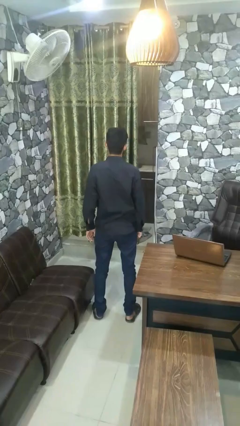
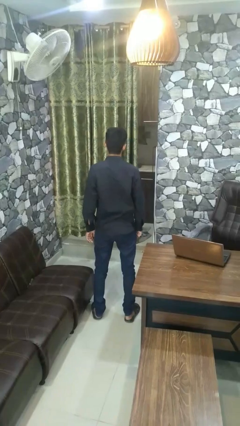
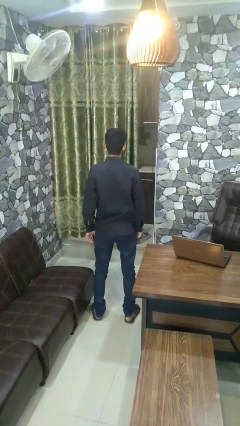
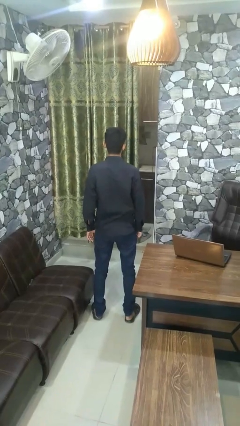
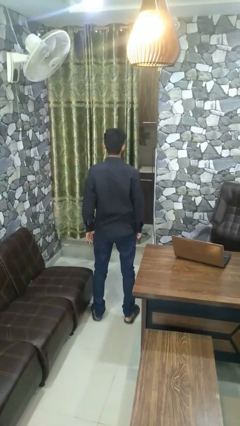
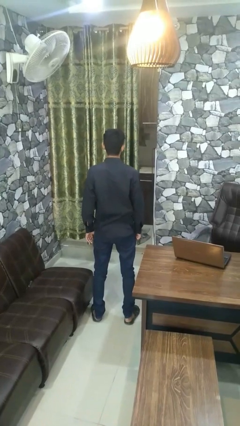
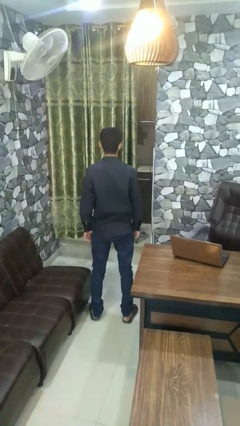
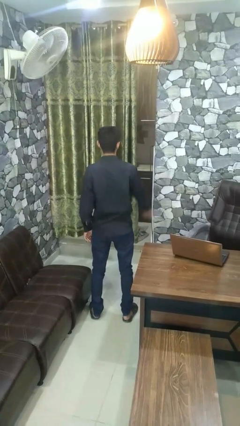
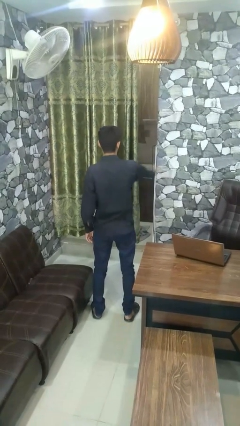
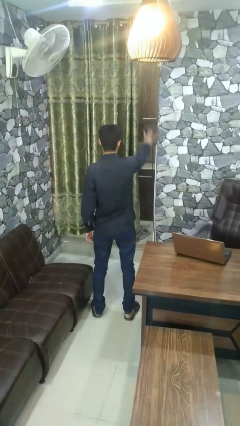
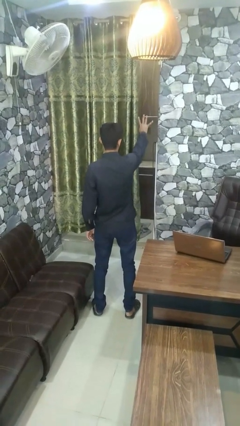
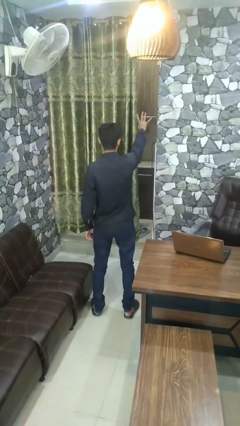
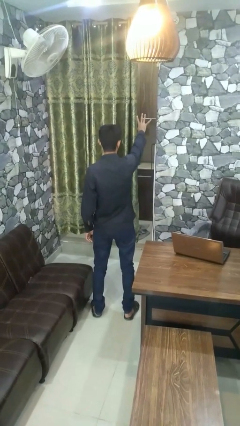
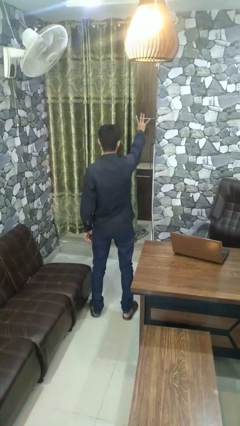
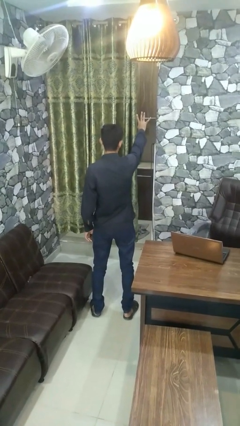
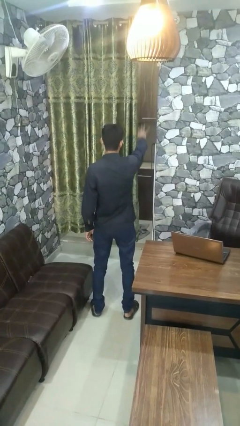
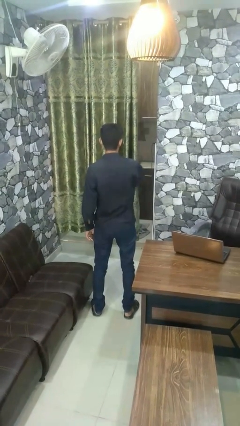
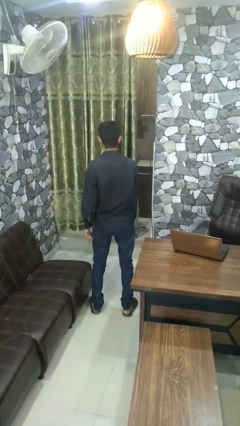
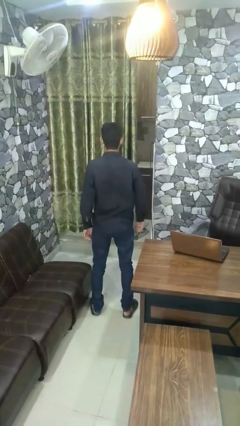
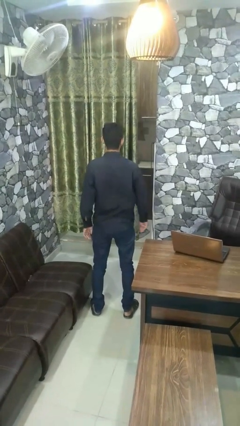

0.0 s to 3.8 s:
person gestures number four

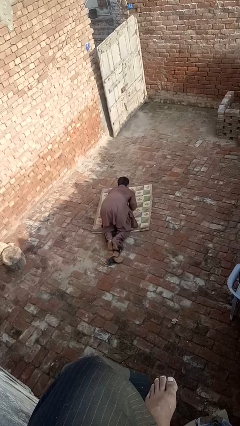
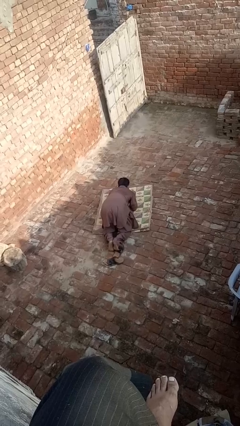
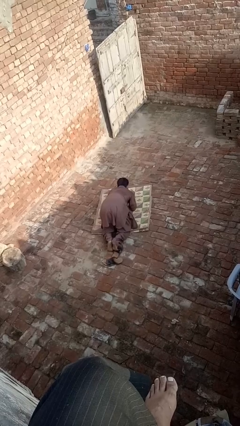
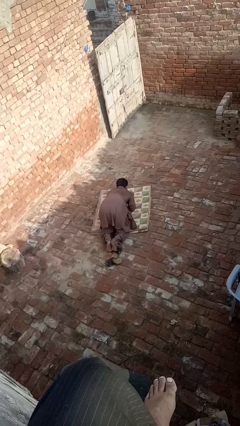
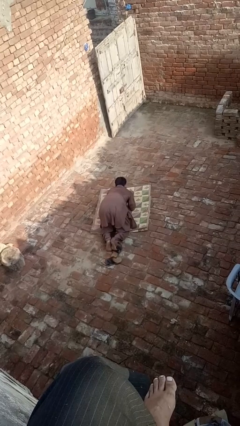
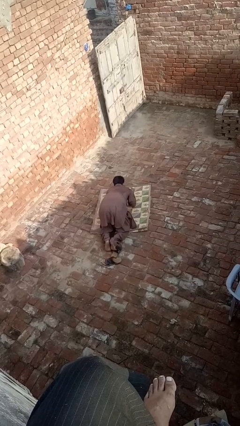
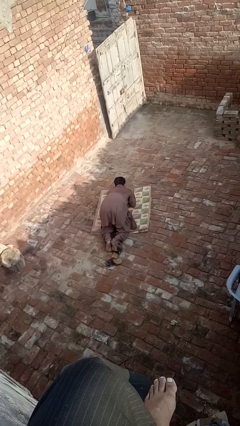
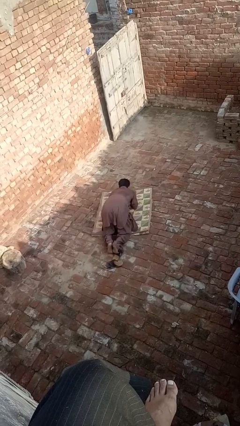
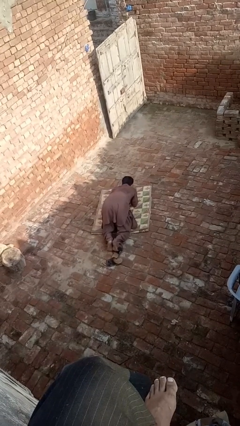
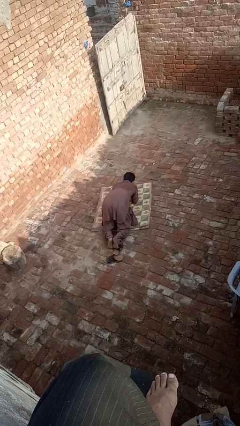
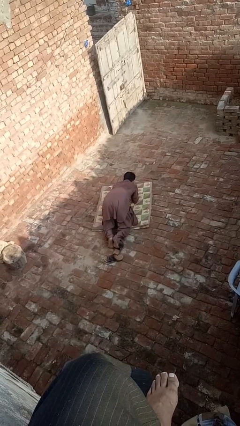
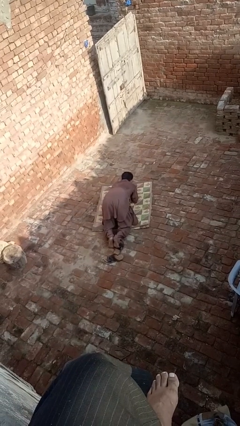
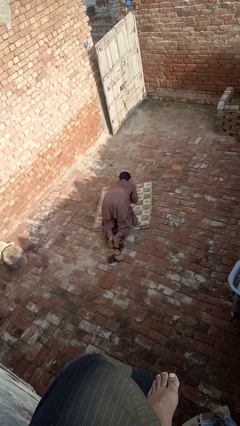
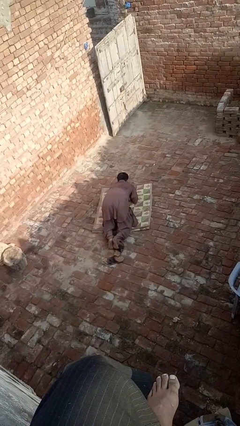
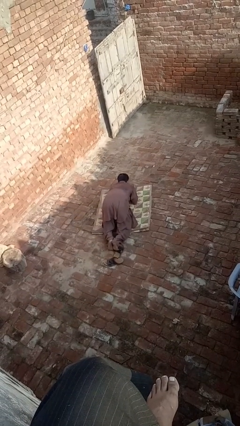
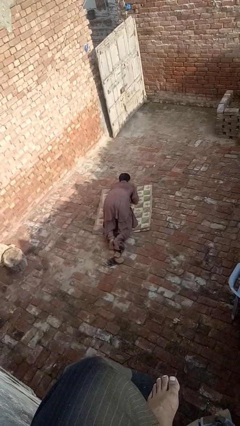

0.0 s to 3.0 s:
person crawls

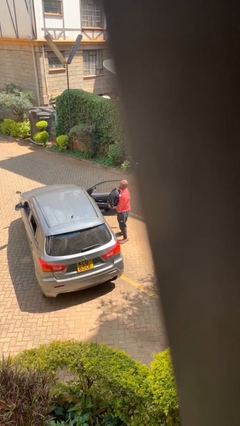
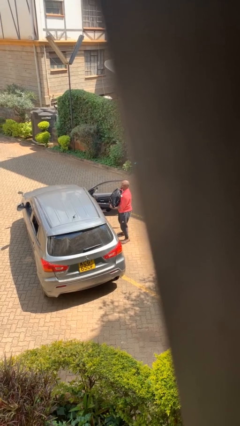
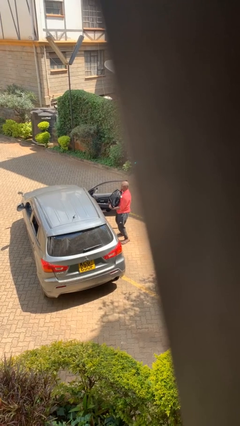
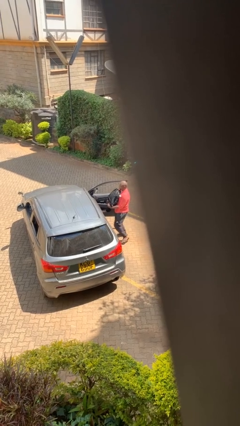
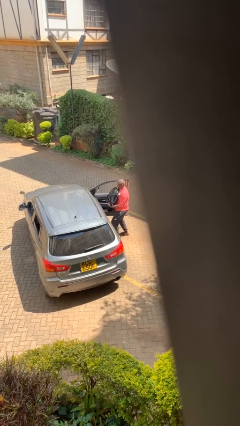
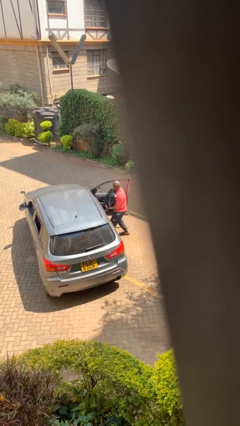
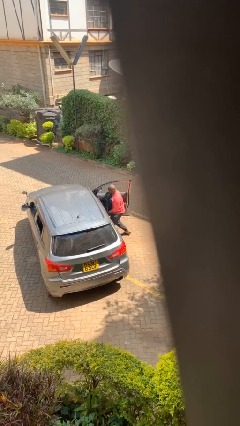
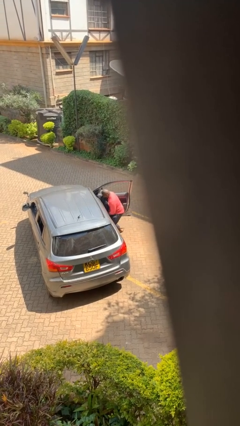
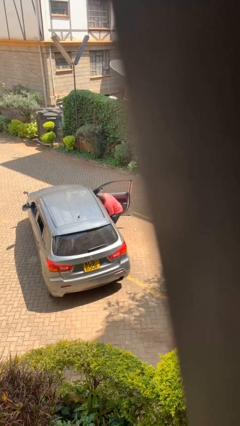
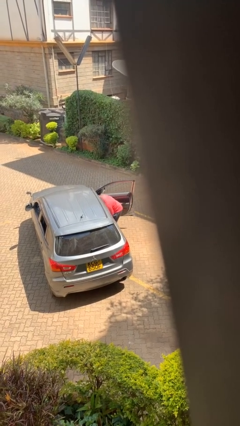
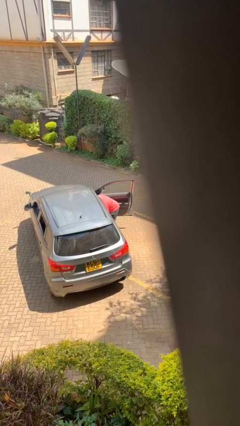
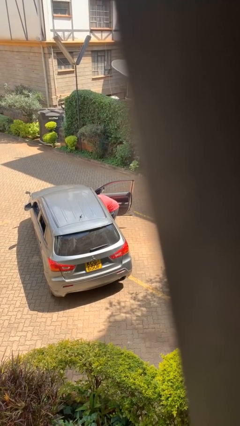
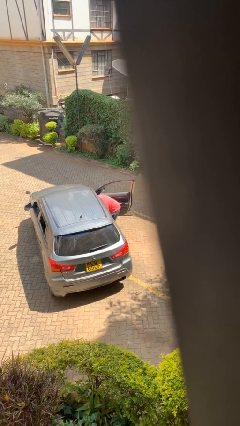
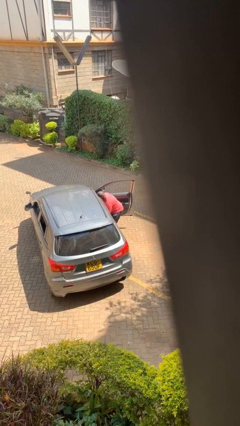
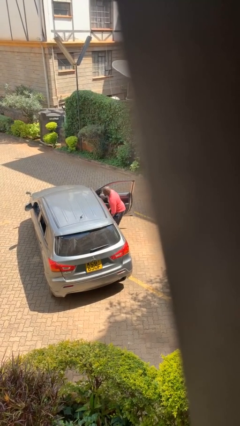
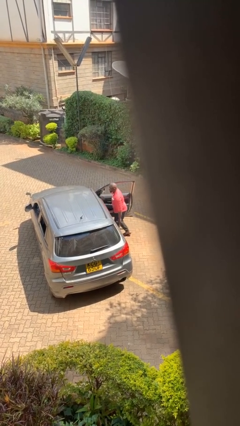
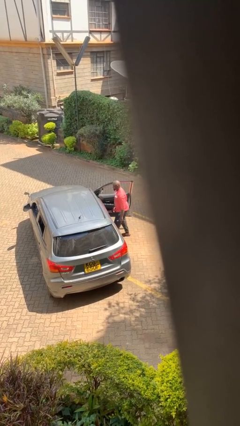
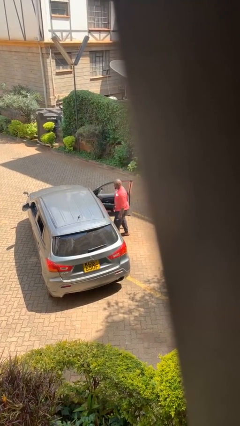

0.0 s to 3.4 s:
person loads car

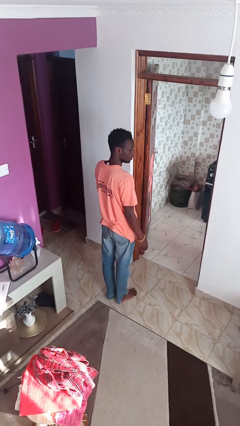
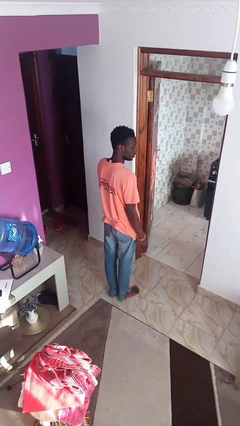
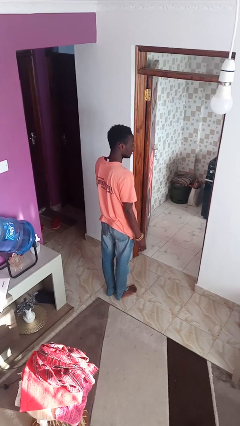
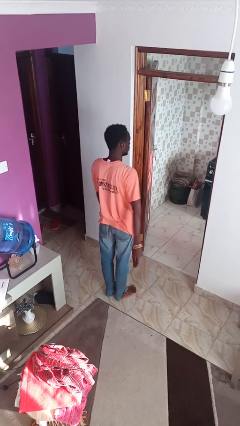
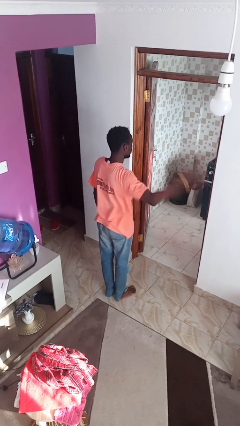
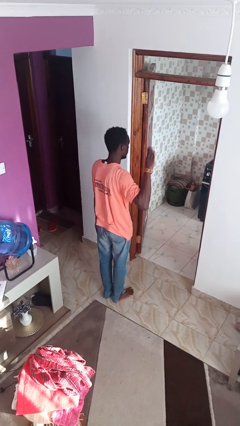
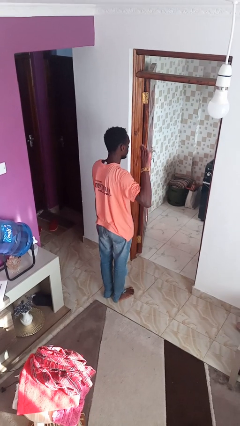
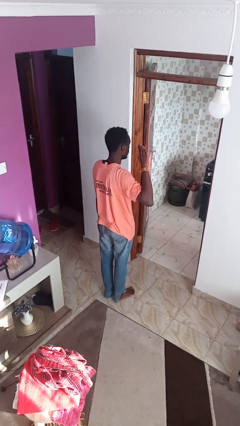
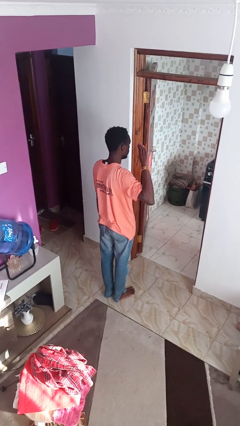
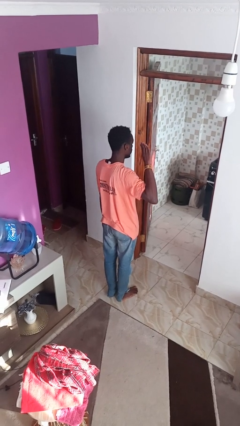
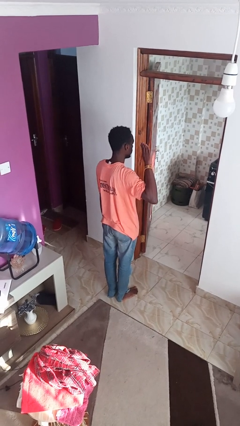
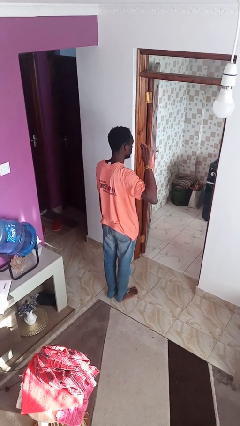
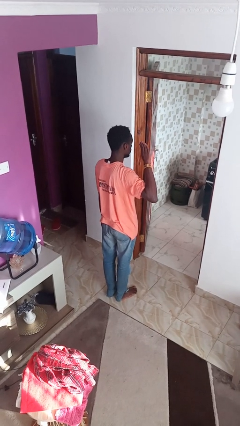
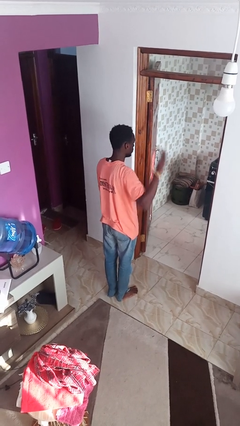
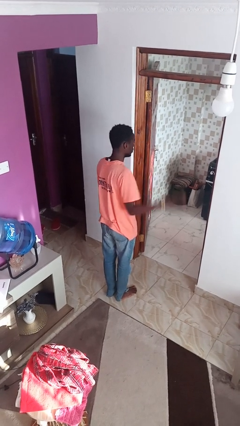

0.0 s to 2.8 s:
person salutes

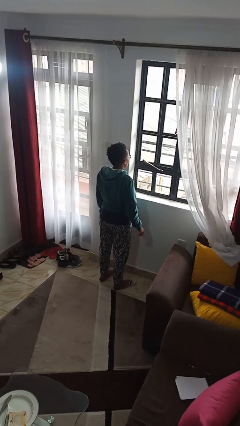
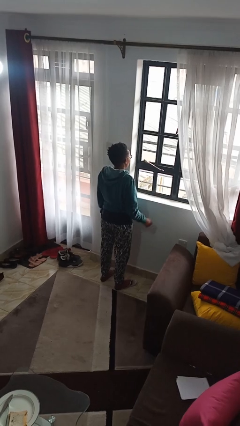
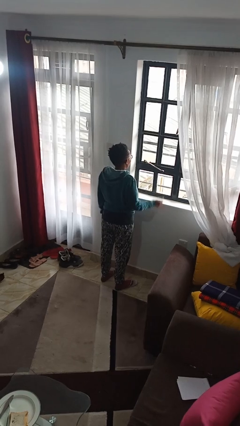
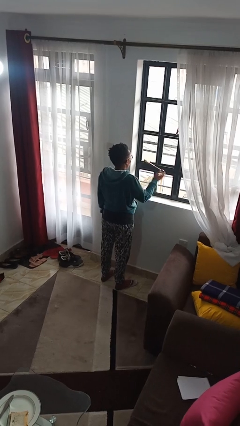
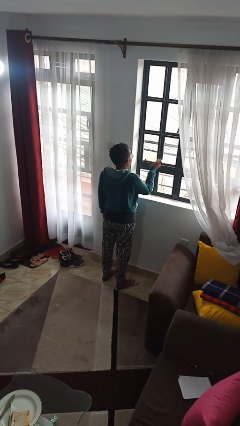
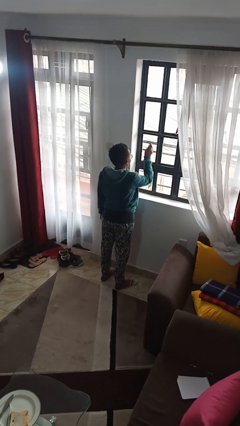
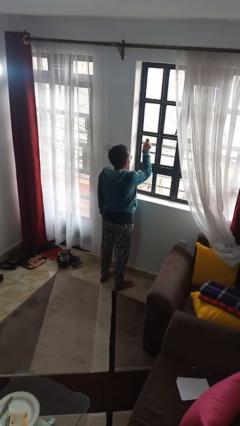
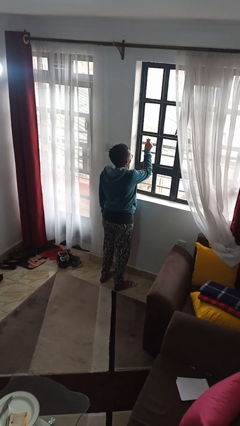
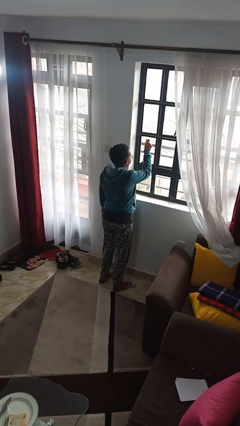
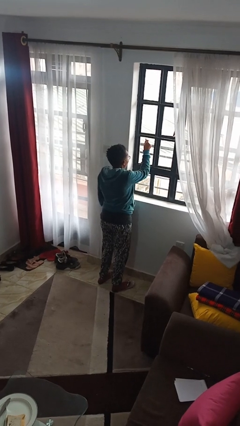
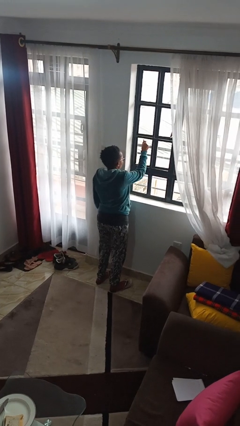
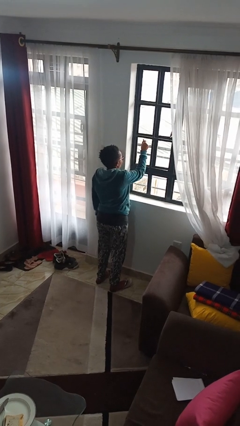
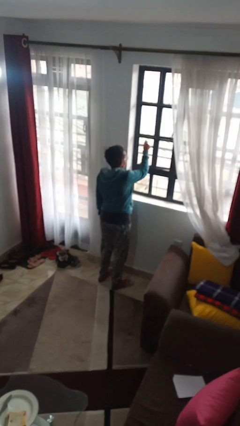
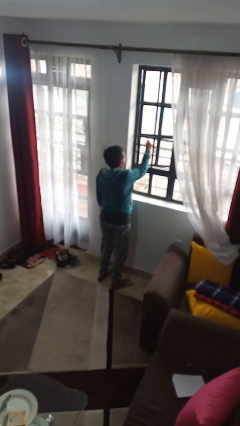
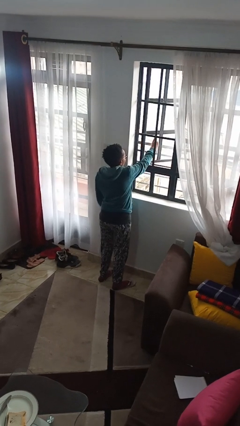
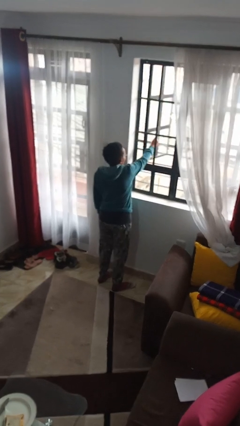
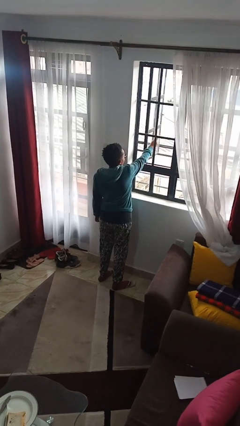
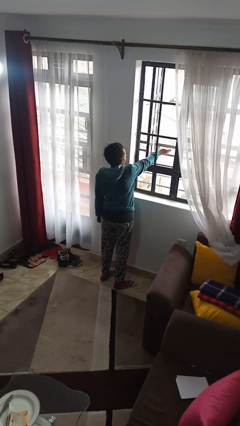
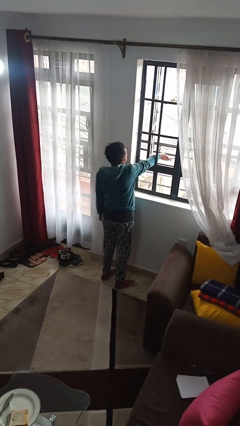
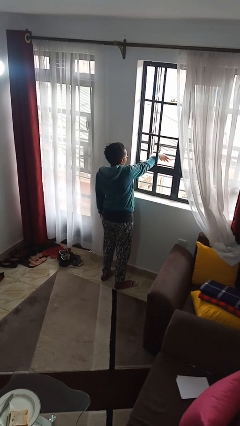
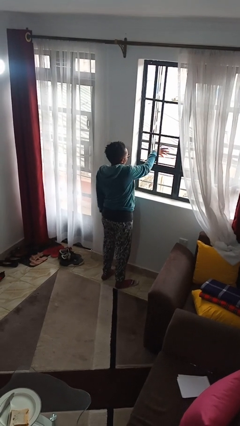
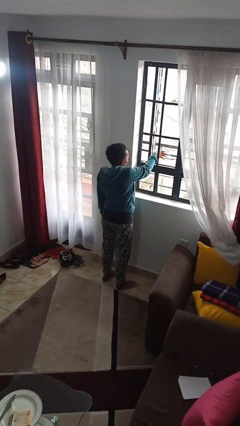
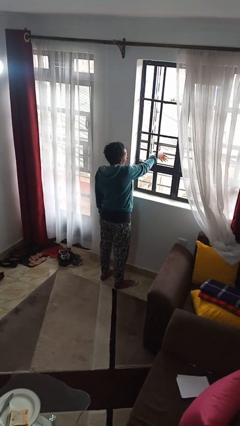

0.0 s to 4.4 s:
person opens home window

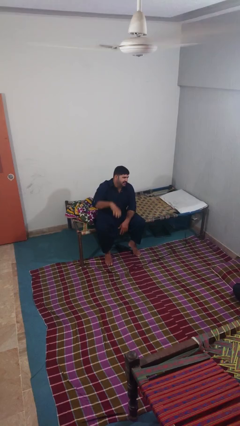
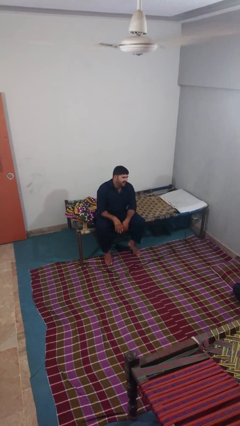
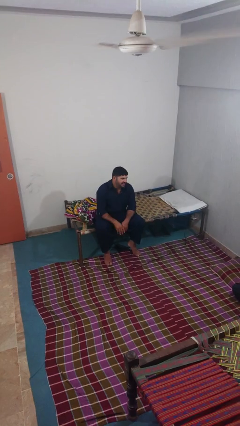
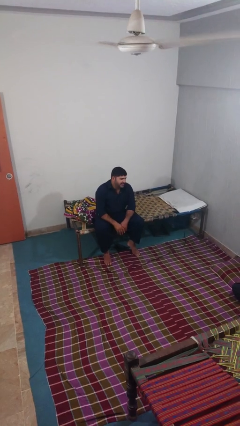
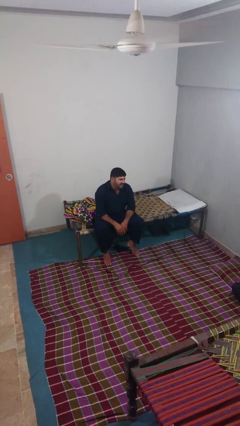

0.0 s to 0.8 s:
person gestures swipe down
